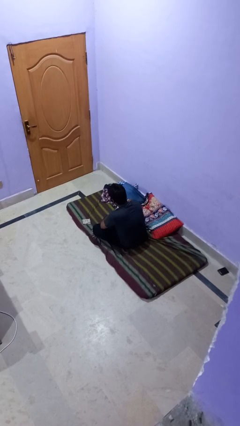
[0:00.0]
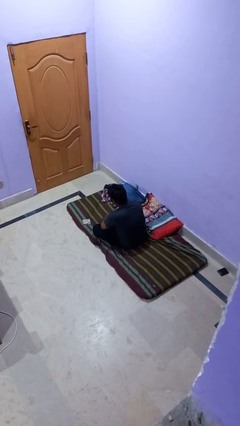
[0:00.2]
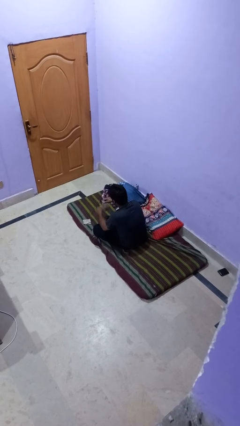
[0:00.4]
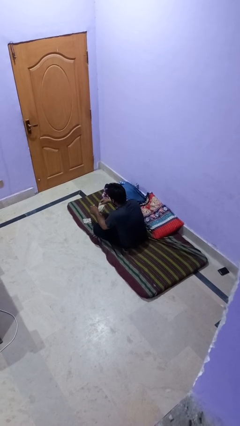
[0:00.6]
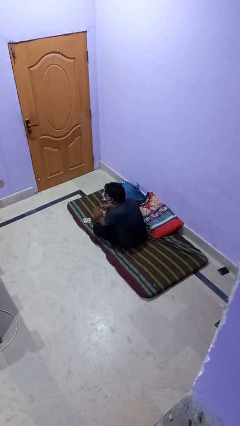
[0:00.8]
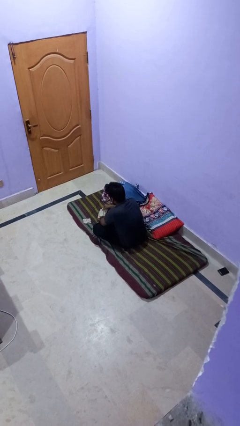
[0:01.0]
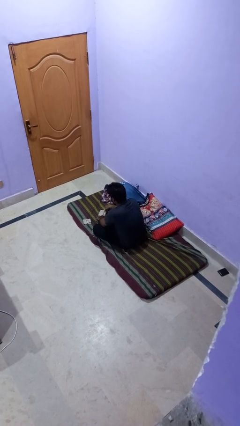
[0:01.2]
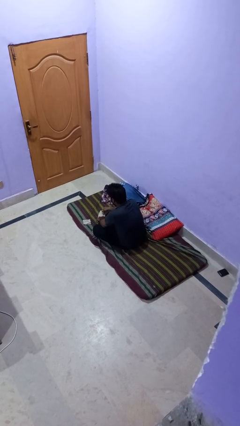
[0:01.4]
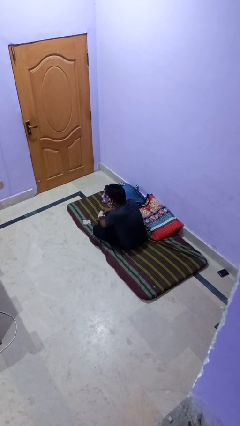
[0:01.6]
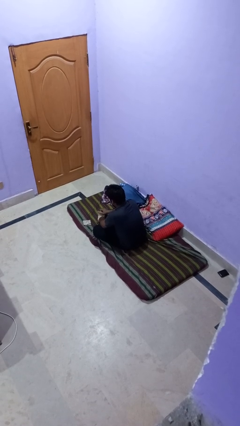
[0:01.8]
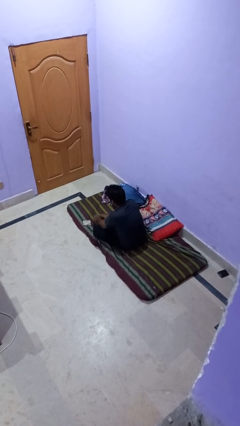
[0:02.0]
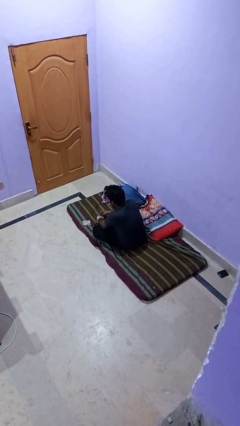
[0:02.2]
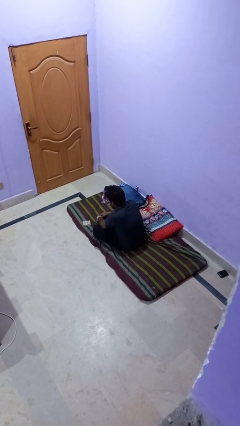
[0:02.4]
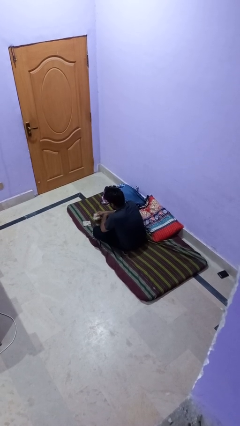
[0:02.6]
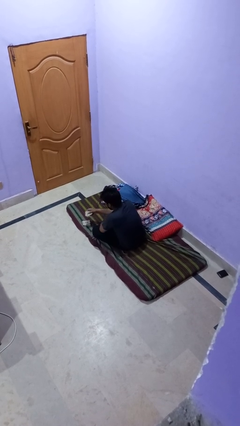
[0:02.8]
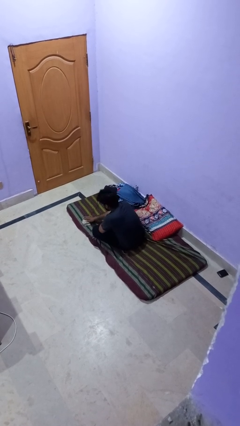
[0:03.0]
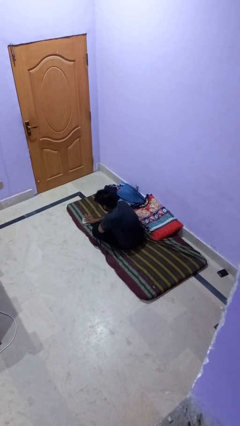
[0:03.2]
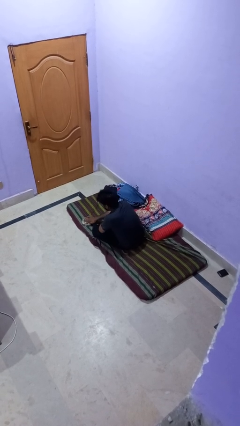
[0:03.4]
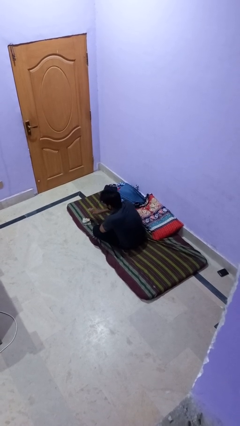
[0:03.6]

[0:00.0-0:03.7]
person folds socks

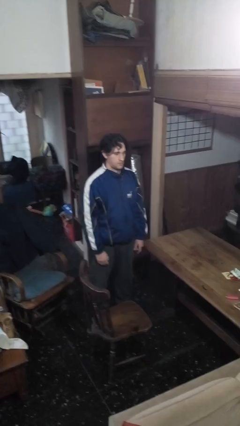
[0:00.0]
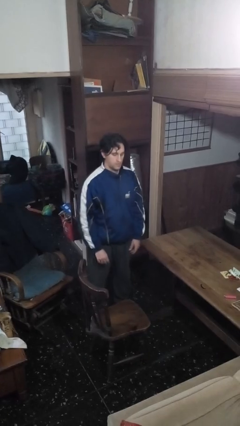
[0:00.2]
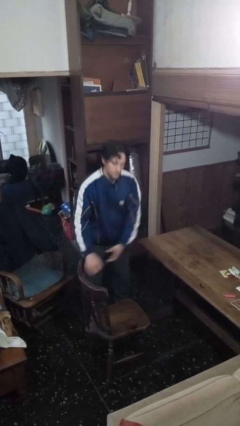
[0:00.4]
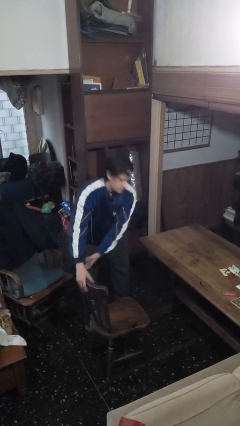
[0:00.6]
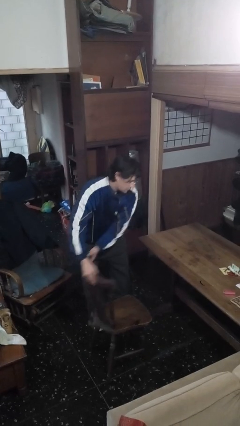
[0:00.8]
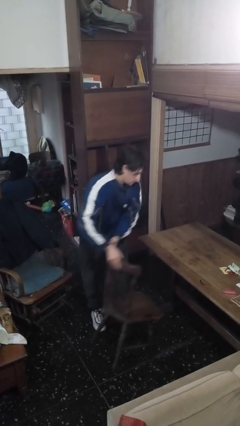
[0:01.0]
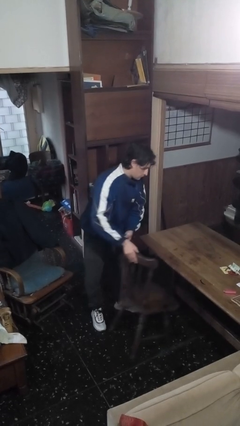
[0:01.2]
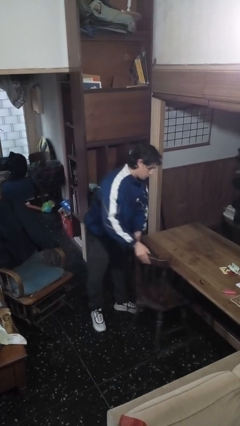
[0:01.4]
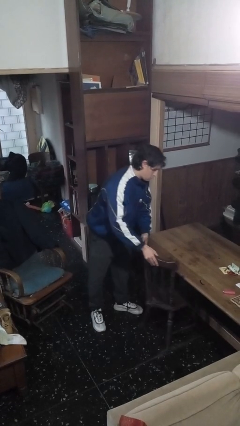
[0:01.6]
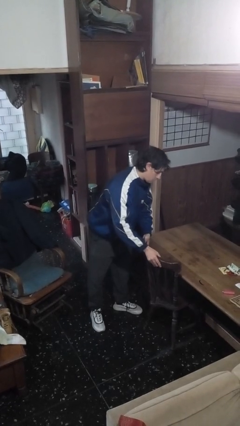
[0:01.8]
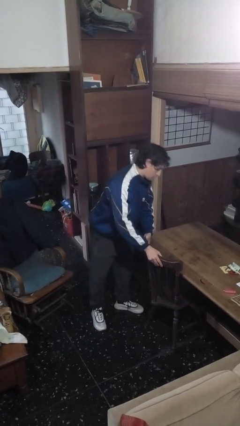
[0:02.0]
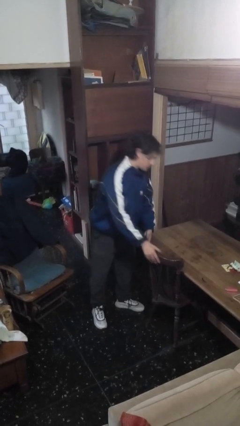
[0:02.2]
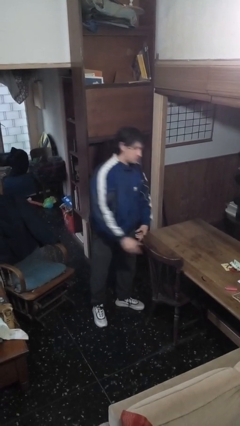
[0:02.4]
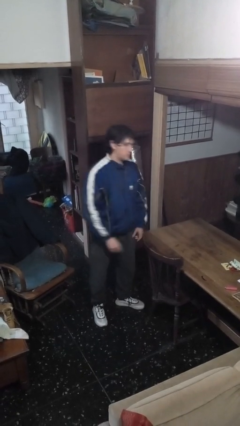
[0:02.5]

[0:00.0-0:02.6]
person pushes in chair

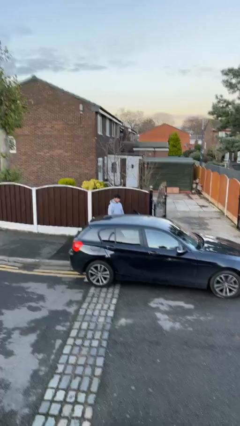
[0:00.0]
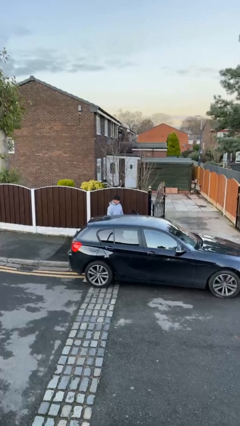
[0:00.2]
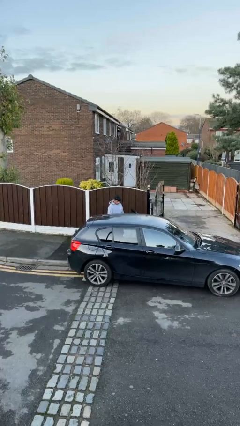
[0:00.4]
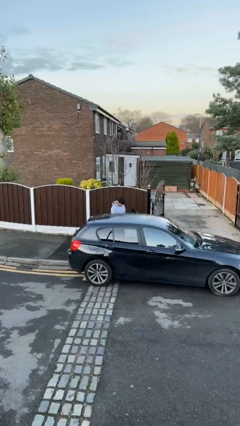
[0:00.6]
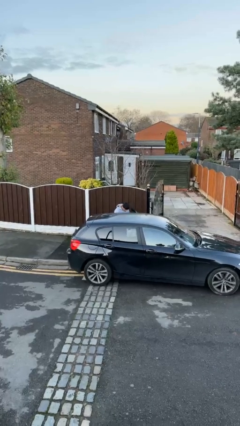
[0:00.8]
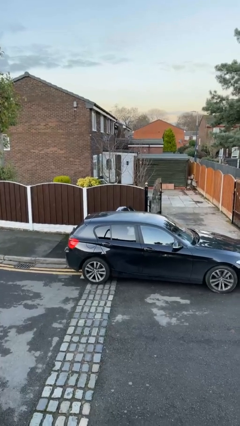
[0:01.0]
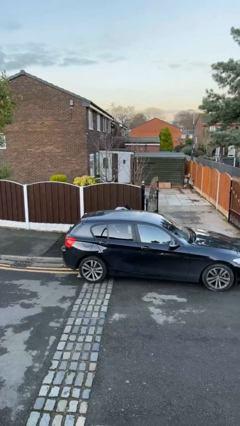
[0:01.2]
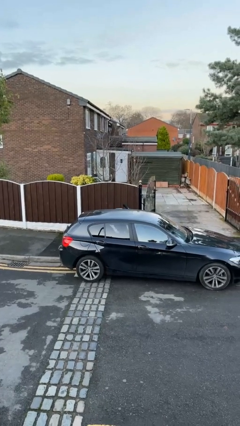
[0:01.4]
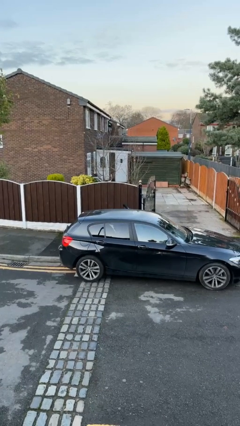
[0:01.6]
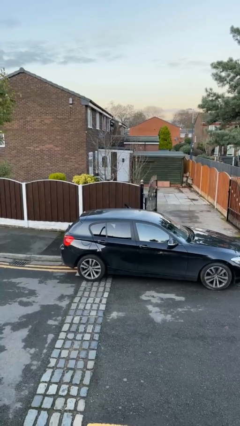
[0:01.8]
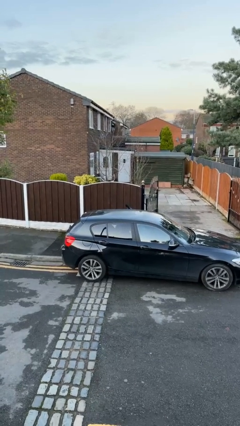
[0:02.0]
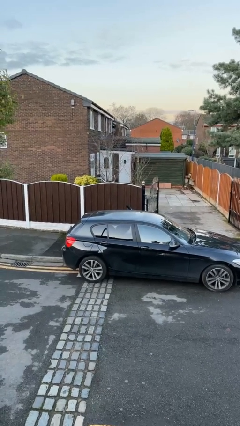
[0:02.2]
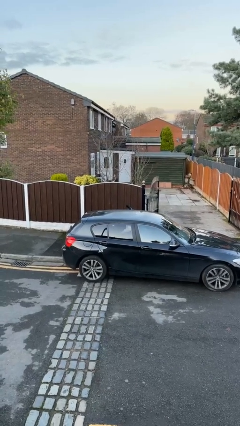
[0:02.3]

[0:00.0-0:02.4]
person enters car

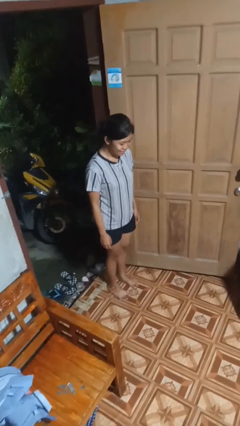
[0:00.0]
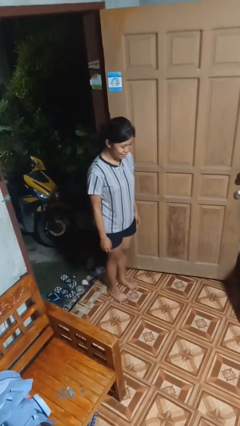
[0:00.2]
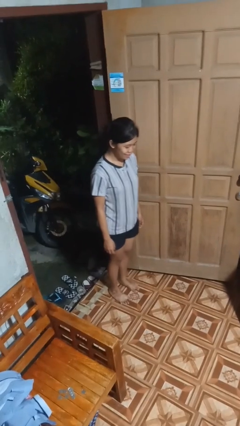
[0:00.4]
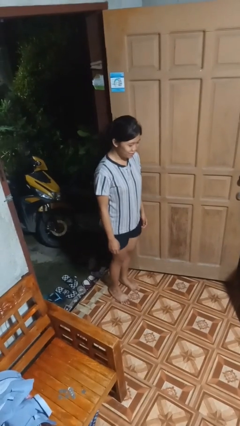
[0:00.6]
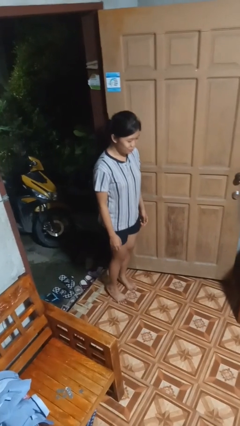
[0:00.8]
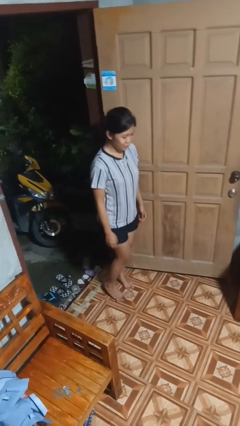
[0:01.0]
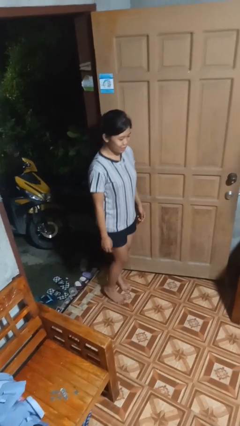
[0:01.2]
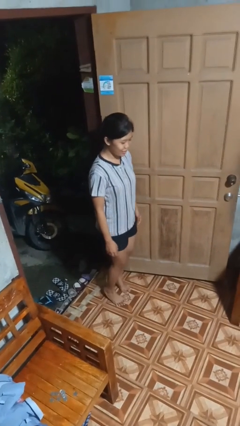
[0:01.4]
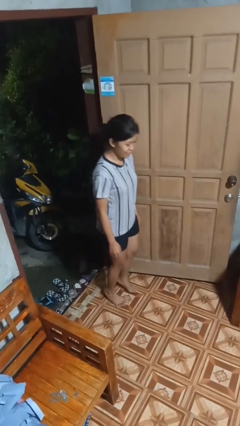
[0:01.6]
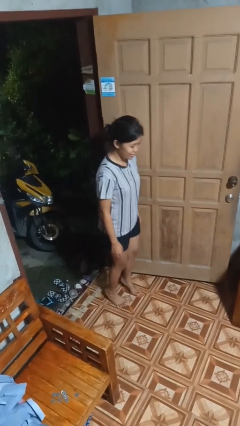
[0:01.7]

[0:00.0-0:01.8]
person walks tiptoe

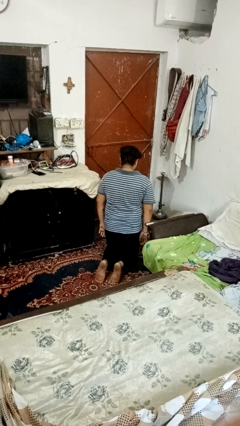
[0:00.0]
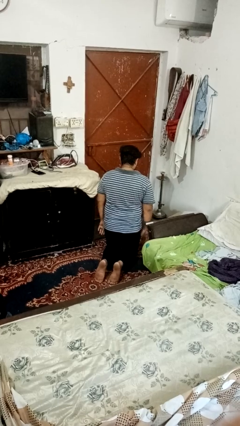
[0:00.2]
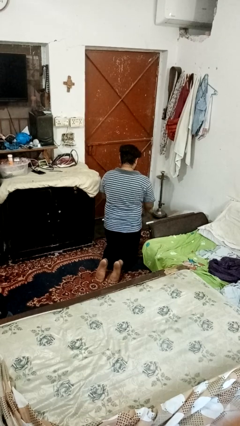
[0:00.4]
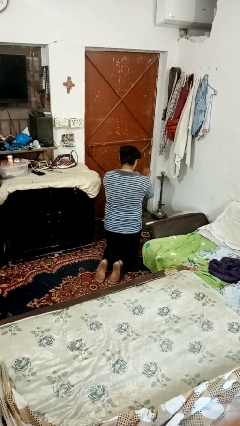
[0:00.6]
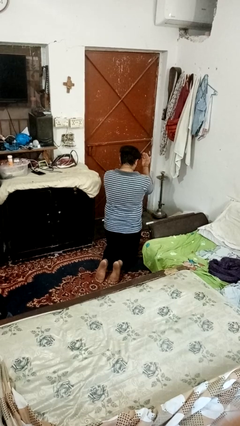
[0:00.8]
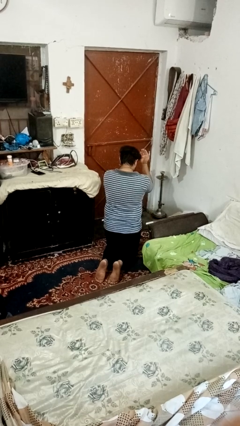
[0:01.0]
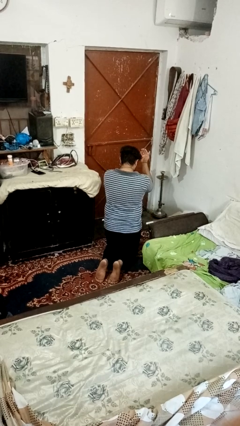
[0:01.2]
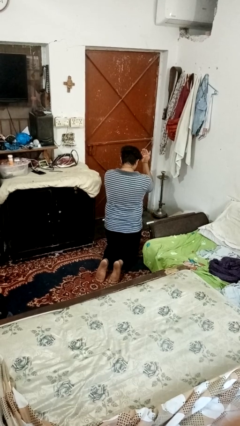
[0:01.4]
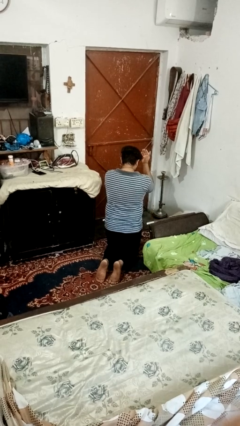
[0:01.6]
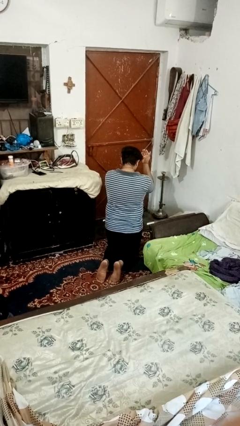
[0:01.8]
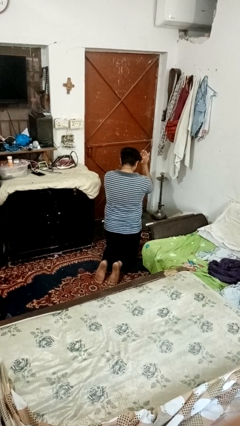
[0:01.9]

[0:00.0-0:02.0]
person prays

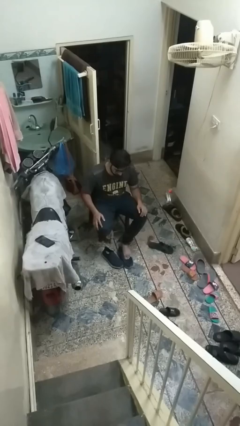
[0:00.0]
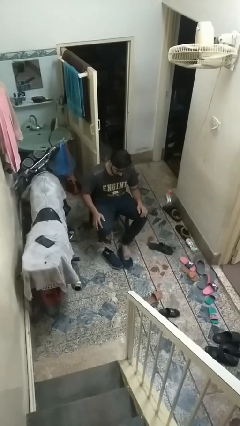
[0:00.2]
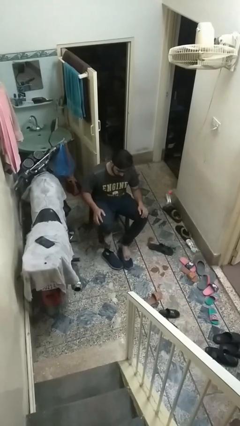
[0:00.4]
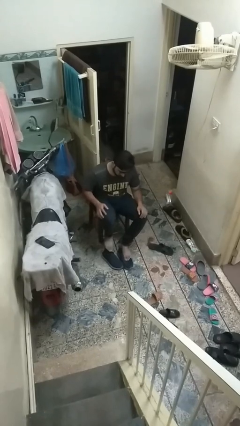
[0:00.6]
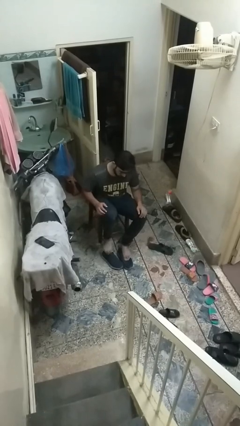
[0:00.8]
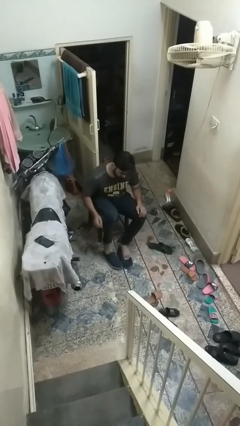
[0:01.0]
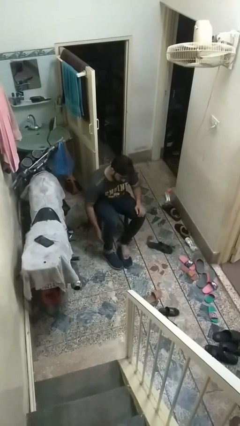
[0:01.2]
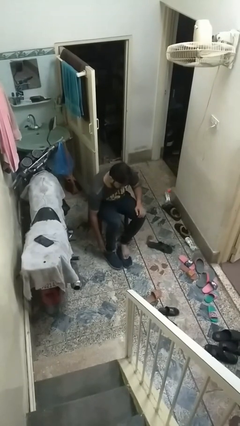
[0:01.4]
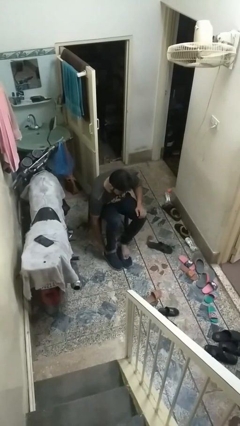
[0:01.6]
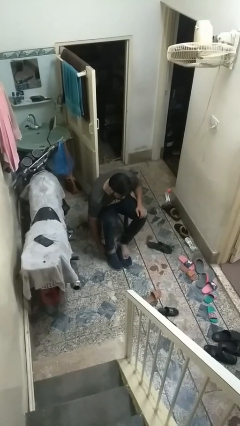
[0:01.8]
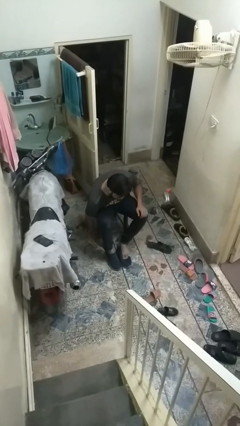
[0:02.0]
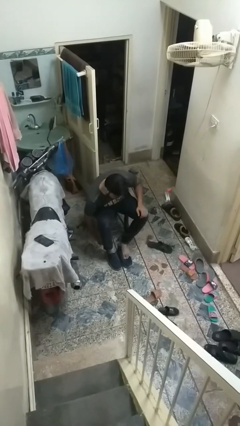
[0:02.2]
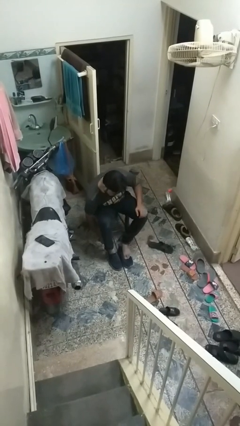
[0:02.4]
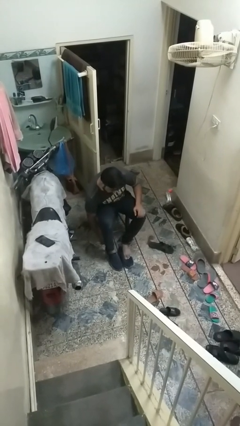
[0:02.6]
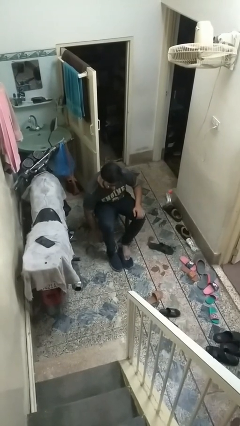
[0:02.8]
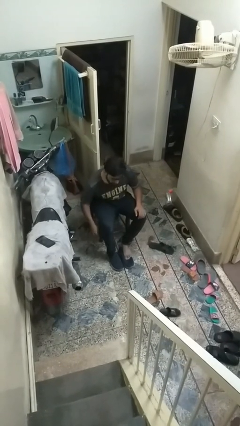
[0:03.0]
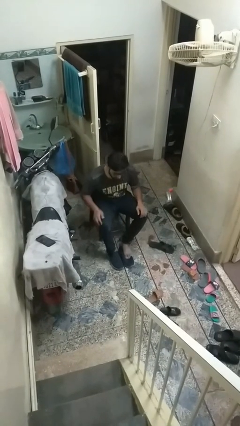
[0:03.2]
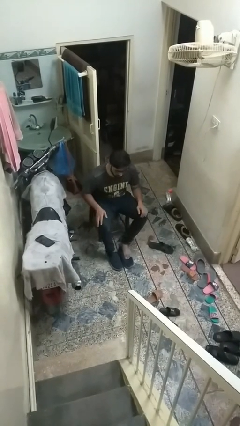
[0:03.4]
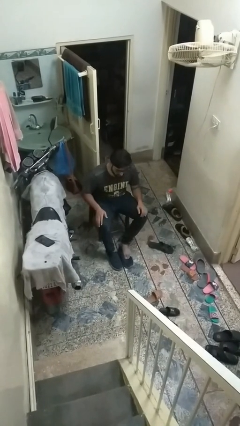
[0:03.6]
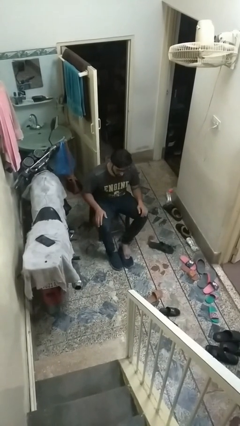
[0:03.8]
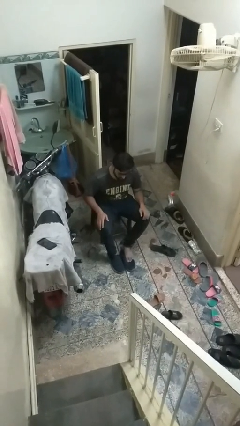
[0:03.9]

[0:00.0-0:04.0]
person puts on shoes

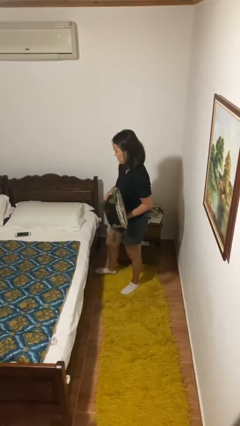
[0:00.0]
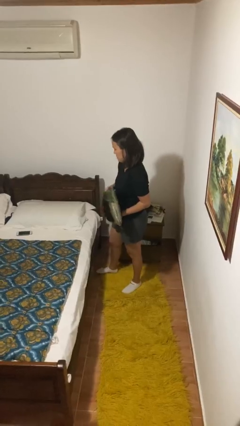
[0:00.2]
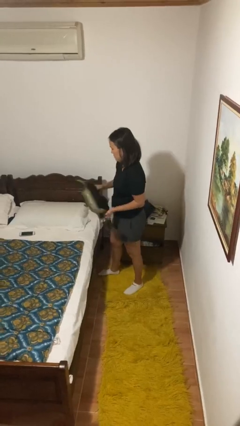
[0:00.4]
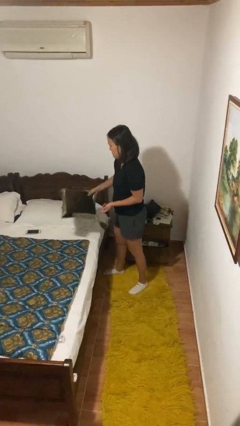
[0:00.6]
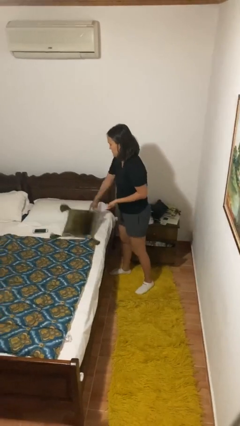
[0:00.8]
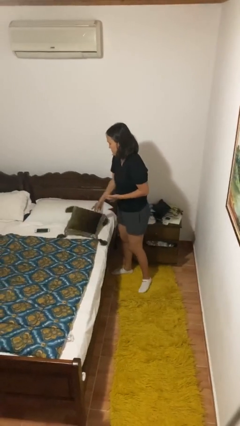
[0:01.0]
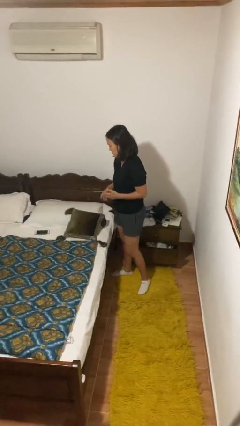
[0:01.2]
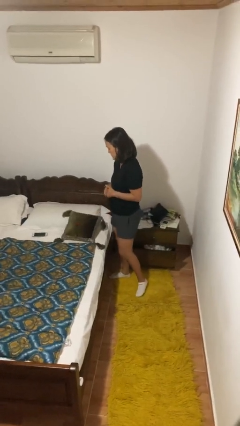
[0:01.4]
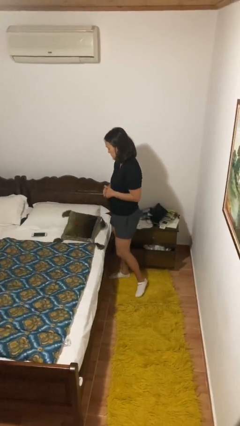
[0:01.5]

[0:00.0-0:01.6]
person puts down object on bed
